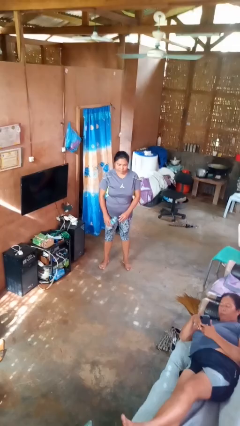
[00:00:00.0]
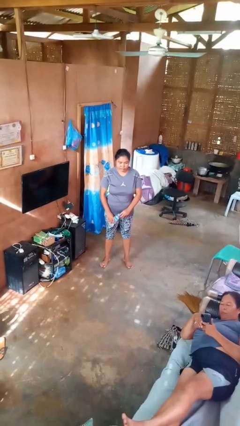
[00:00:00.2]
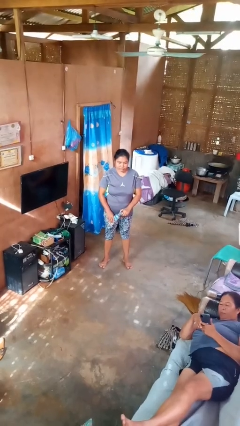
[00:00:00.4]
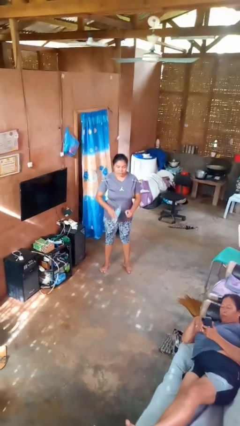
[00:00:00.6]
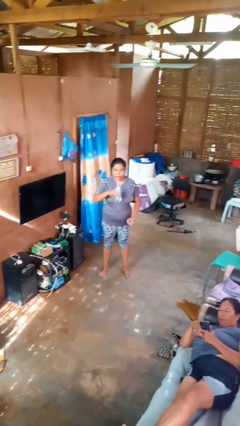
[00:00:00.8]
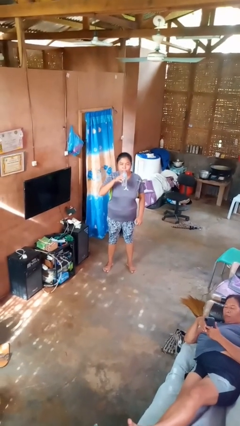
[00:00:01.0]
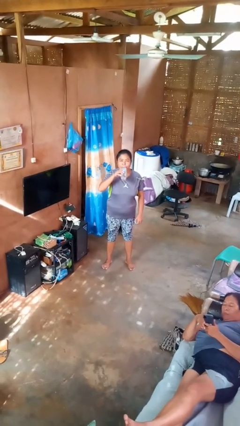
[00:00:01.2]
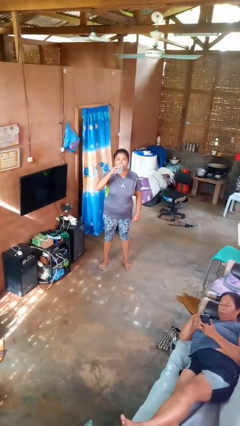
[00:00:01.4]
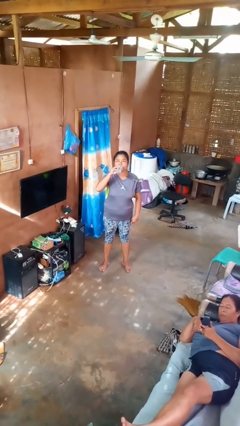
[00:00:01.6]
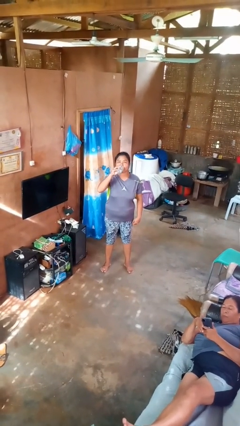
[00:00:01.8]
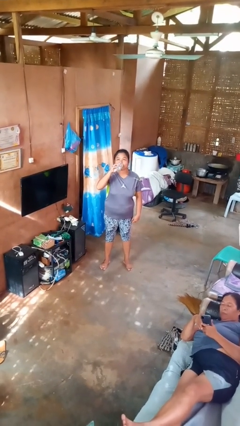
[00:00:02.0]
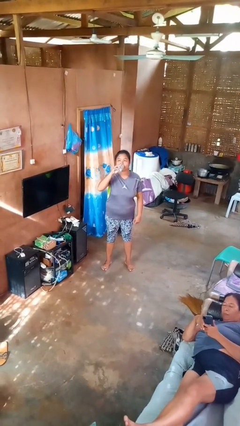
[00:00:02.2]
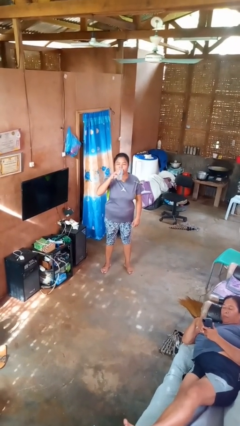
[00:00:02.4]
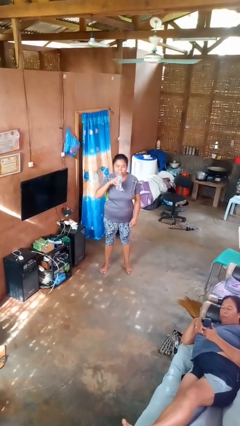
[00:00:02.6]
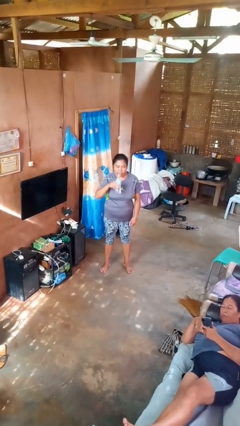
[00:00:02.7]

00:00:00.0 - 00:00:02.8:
person drinks from bottle

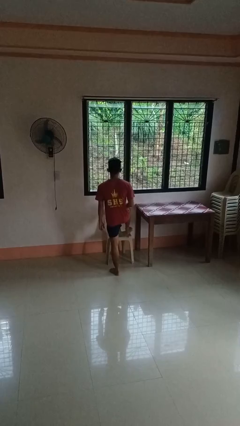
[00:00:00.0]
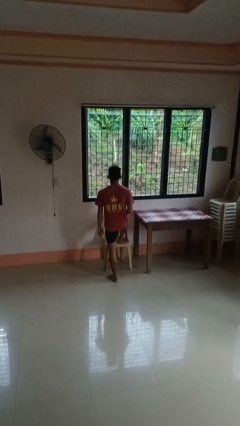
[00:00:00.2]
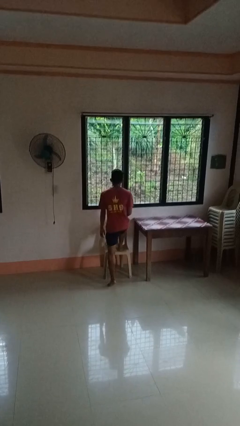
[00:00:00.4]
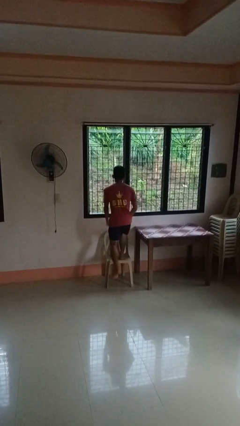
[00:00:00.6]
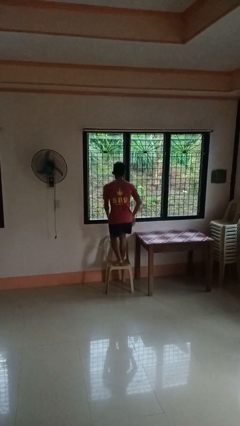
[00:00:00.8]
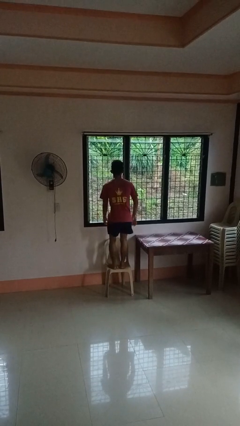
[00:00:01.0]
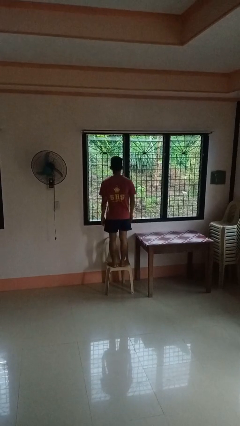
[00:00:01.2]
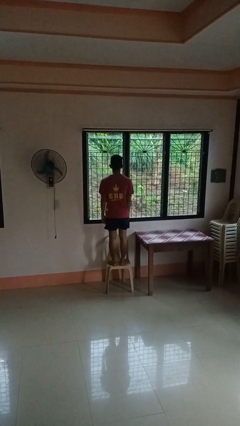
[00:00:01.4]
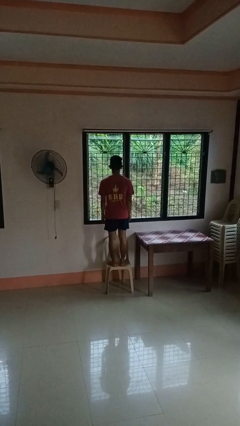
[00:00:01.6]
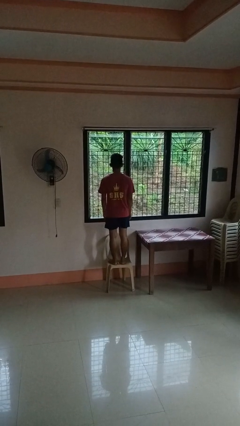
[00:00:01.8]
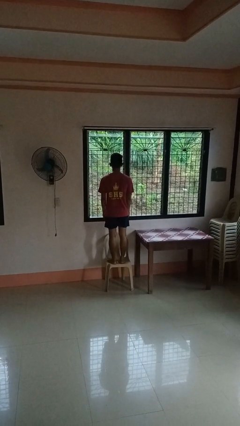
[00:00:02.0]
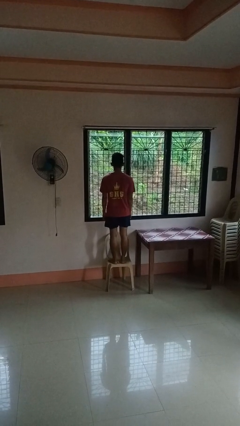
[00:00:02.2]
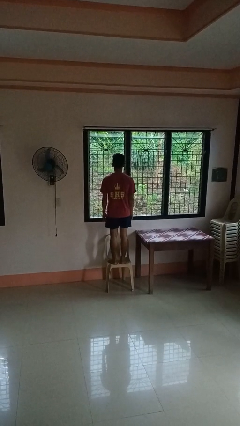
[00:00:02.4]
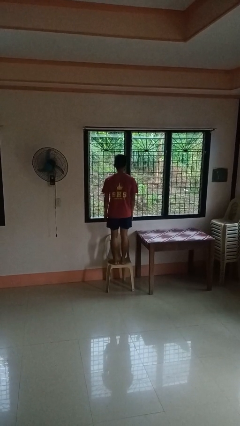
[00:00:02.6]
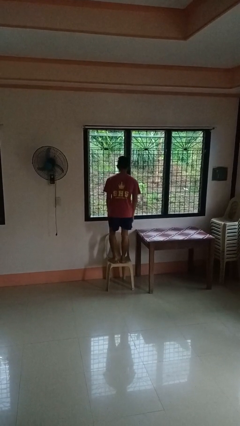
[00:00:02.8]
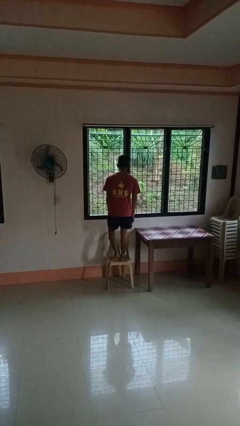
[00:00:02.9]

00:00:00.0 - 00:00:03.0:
person climbs on chair

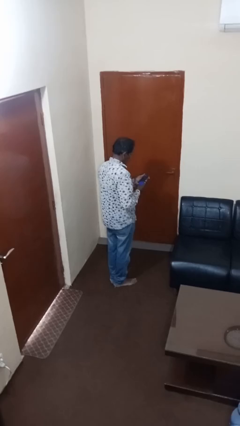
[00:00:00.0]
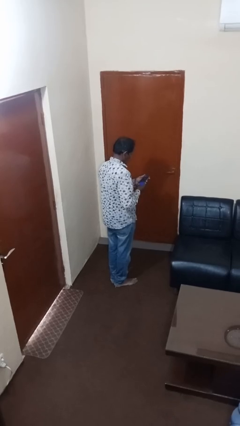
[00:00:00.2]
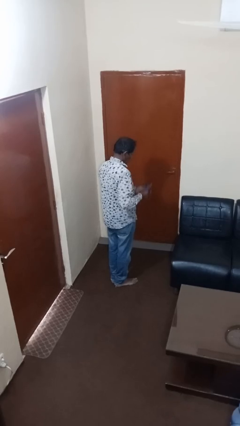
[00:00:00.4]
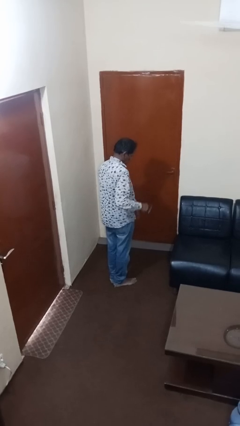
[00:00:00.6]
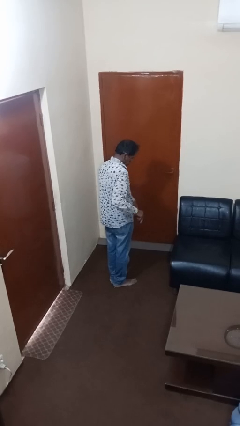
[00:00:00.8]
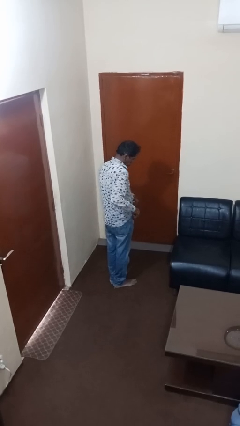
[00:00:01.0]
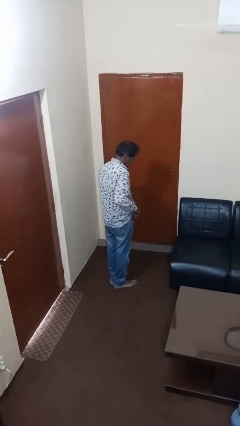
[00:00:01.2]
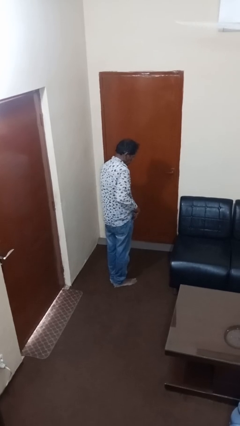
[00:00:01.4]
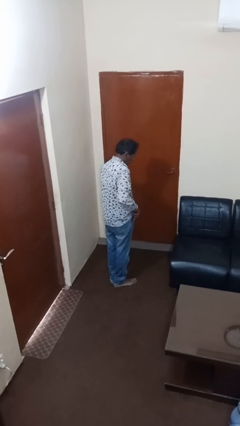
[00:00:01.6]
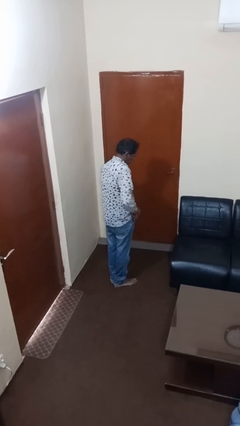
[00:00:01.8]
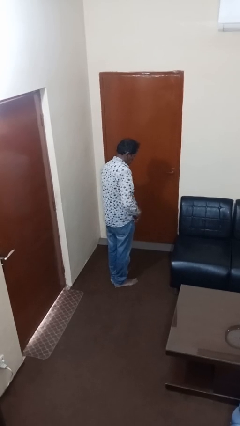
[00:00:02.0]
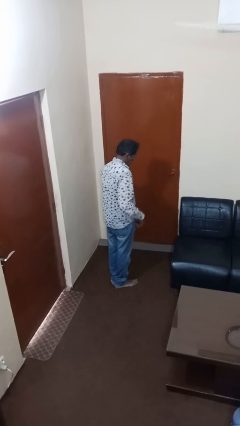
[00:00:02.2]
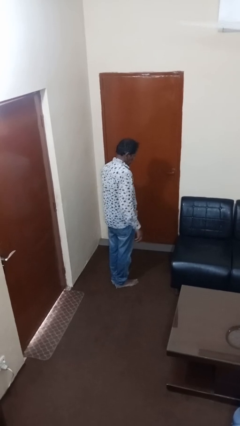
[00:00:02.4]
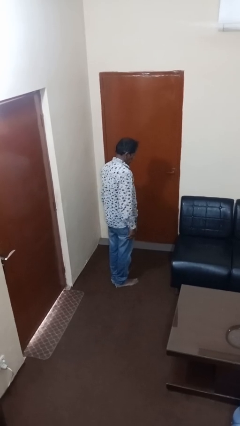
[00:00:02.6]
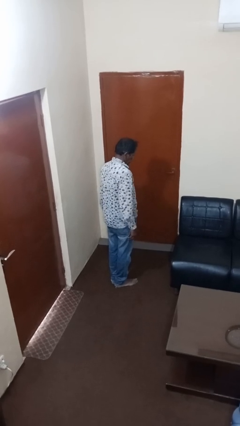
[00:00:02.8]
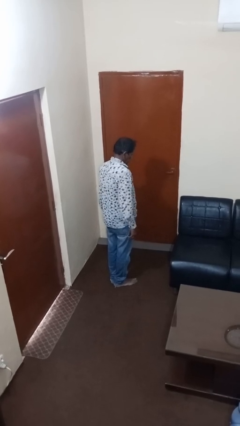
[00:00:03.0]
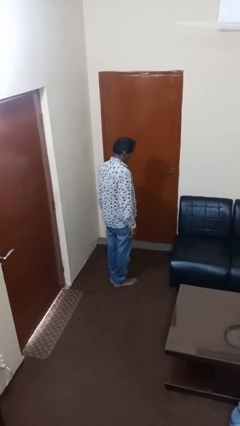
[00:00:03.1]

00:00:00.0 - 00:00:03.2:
person puts phone into pocket

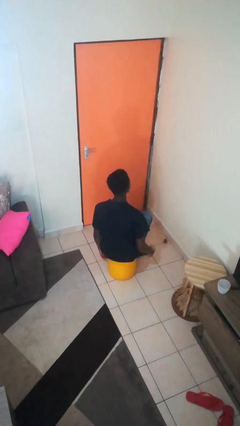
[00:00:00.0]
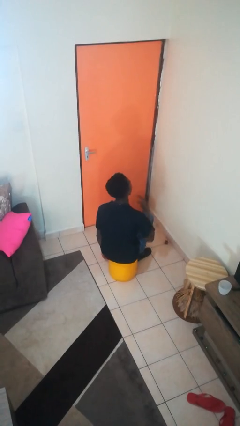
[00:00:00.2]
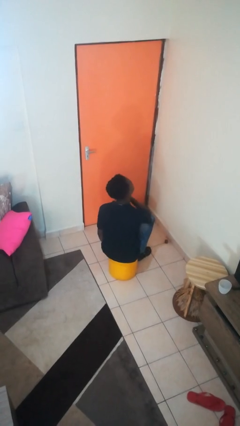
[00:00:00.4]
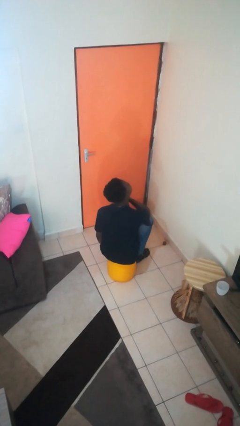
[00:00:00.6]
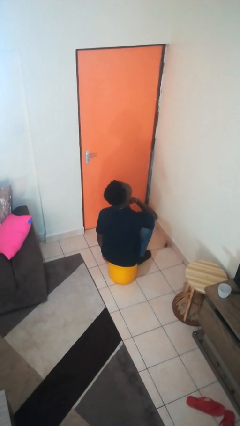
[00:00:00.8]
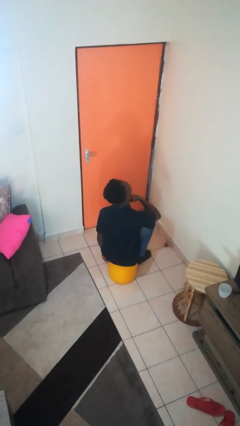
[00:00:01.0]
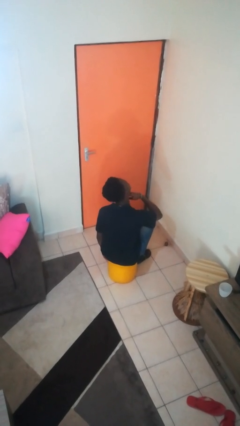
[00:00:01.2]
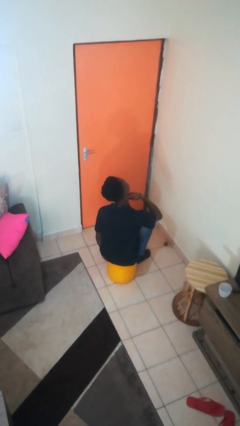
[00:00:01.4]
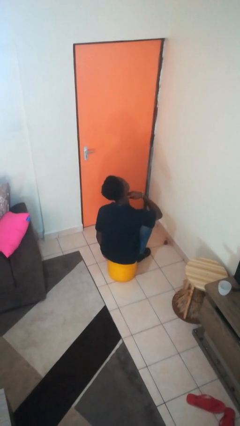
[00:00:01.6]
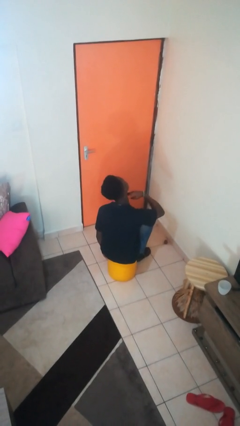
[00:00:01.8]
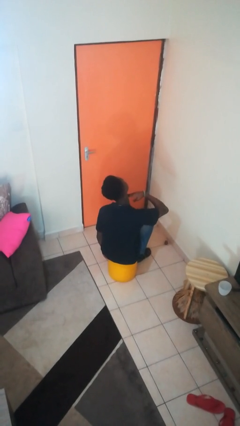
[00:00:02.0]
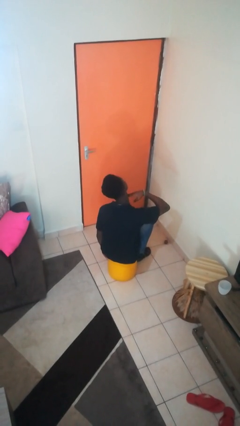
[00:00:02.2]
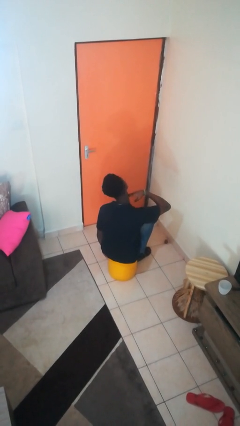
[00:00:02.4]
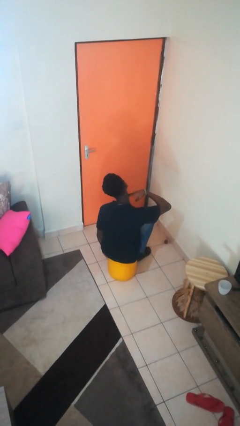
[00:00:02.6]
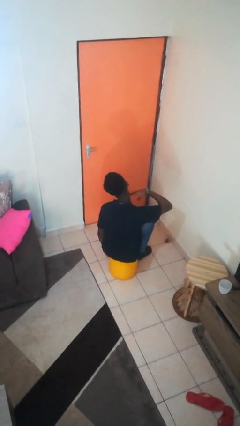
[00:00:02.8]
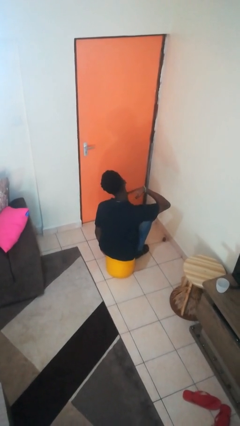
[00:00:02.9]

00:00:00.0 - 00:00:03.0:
person gestures cut

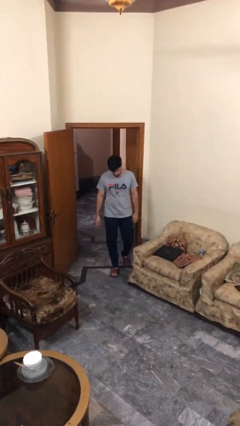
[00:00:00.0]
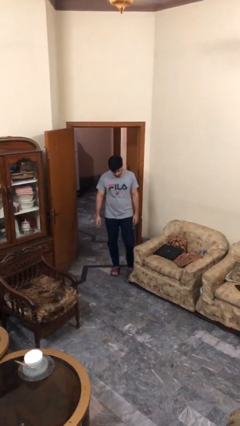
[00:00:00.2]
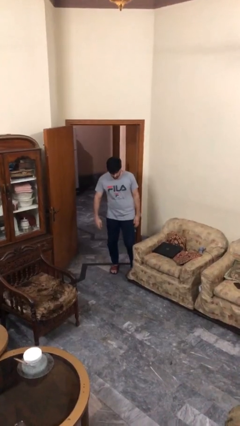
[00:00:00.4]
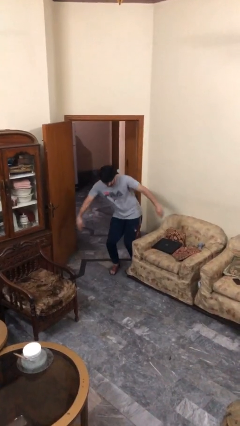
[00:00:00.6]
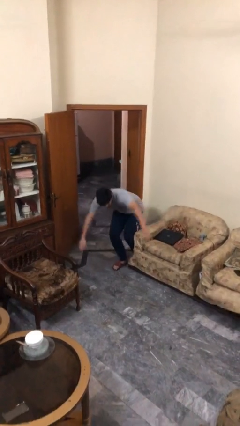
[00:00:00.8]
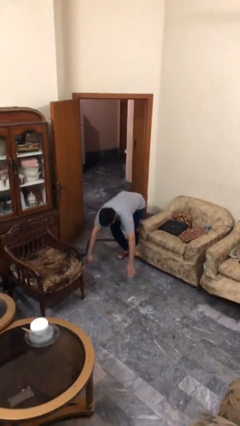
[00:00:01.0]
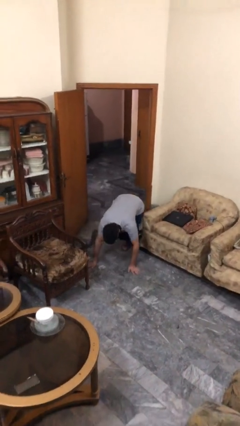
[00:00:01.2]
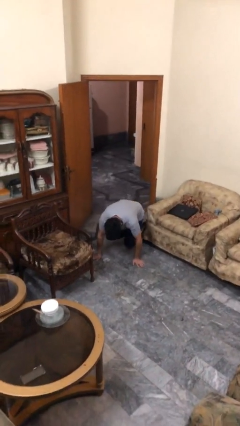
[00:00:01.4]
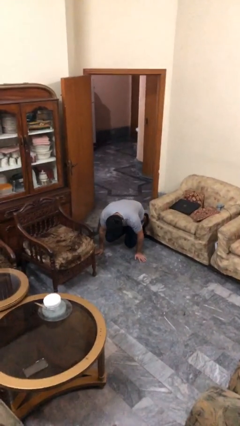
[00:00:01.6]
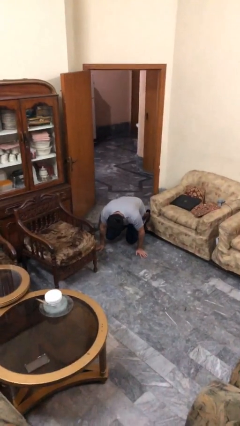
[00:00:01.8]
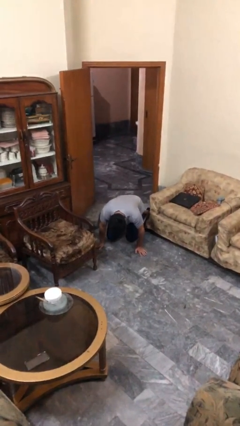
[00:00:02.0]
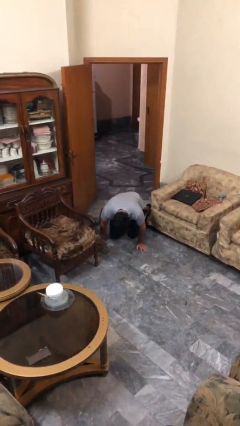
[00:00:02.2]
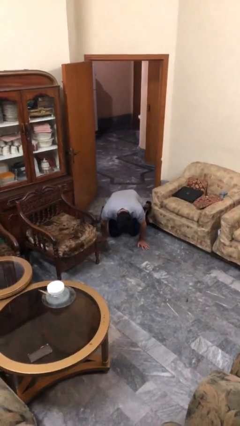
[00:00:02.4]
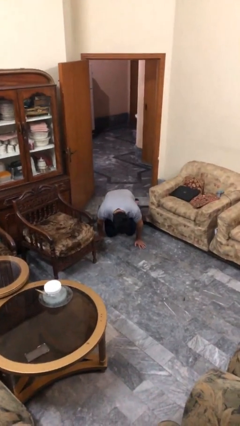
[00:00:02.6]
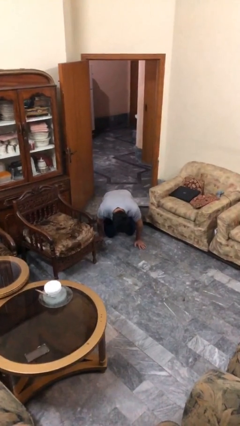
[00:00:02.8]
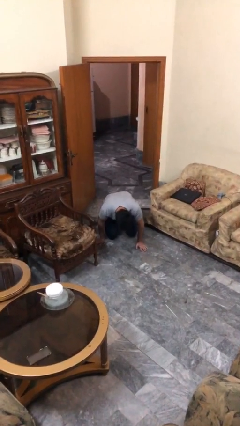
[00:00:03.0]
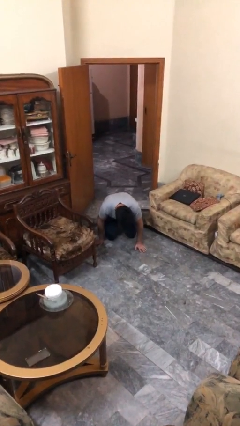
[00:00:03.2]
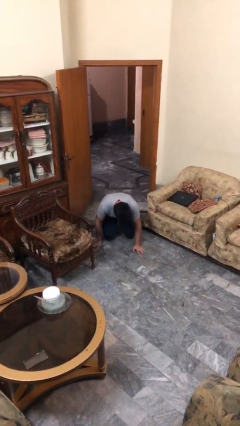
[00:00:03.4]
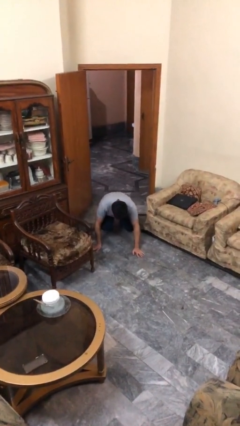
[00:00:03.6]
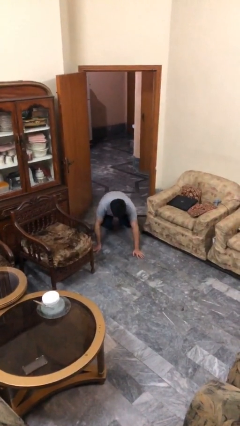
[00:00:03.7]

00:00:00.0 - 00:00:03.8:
person trips on object on floor

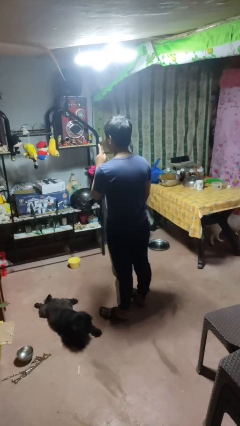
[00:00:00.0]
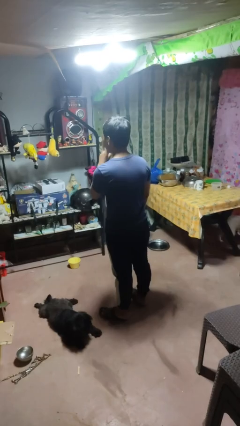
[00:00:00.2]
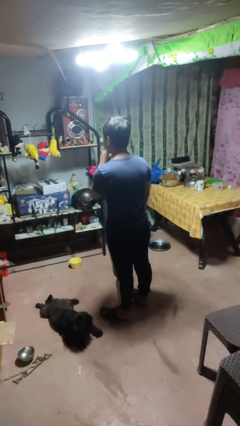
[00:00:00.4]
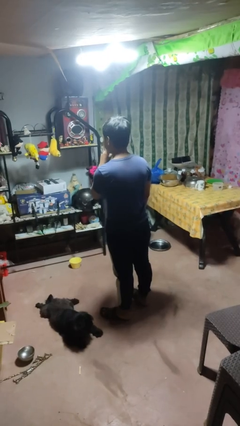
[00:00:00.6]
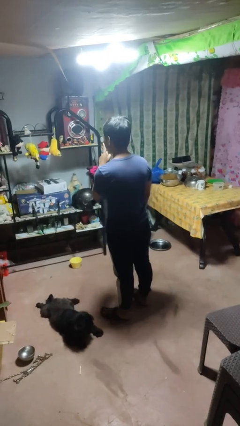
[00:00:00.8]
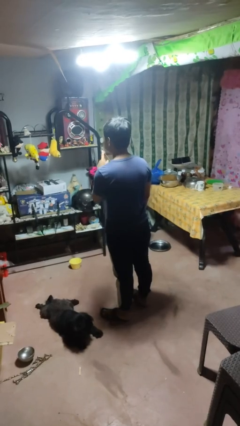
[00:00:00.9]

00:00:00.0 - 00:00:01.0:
person gestures be quiet

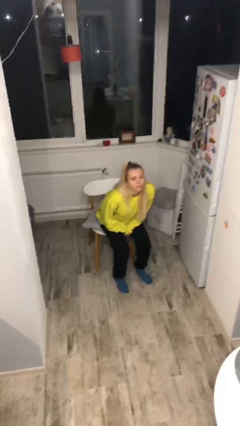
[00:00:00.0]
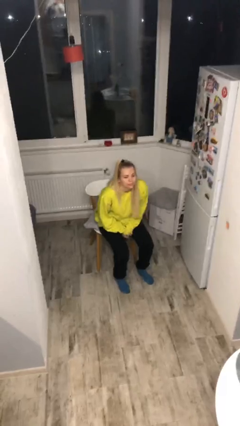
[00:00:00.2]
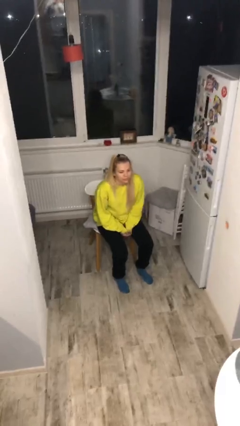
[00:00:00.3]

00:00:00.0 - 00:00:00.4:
person sits down
